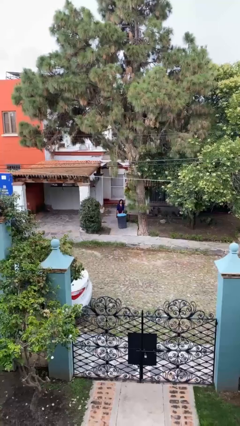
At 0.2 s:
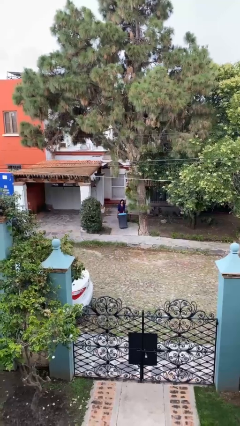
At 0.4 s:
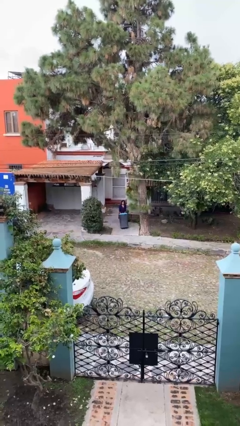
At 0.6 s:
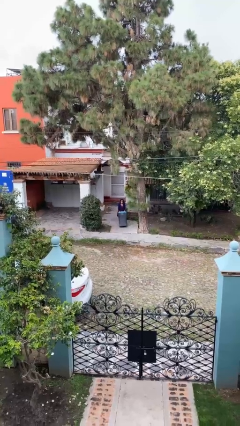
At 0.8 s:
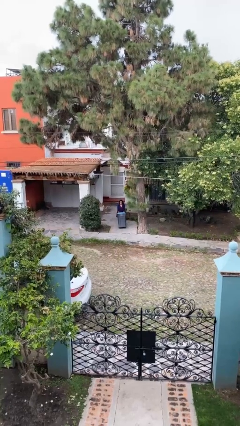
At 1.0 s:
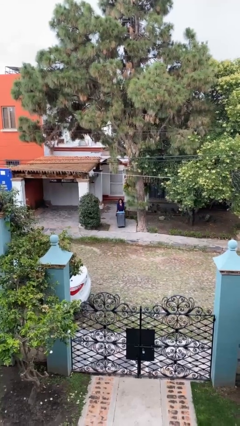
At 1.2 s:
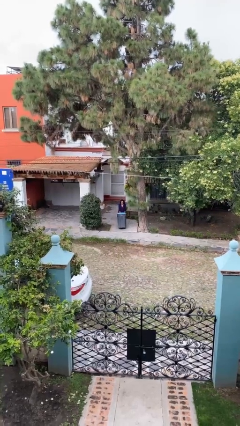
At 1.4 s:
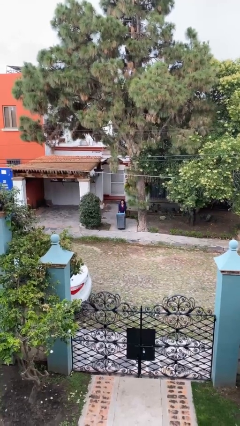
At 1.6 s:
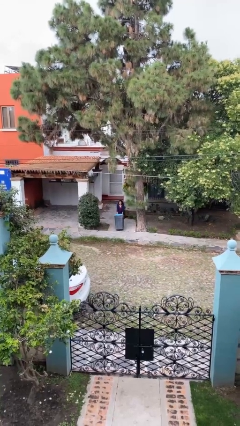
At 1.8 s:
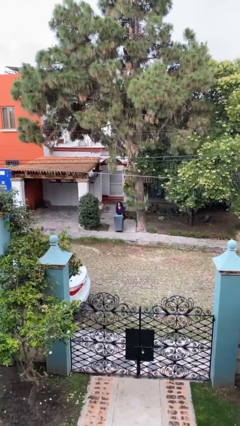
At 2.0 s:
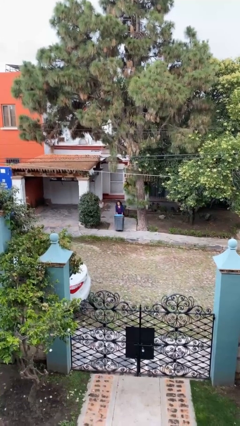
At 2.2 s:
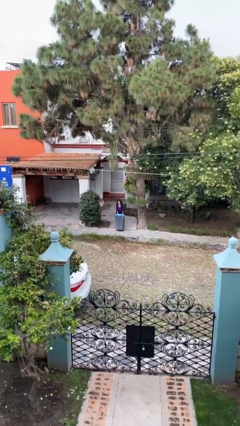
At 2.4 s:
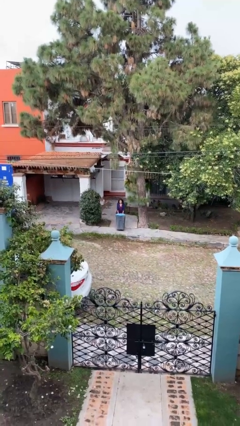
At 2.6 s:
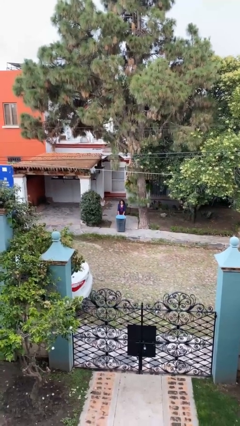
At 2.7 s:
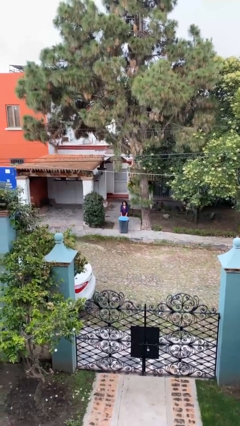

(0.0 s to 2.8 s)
person pushes wheeled trashcan

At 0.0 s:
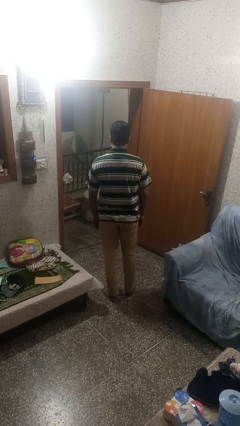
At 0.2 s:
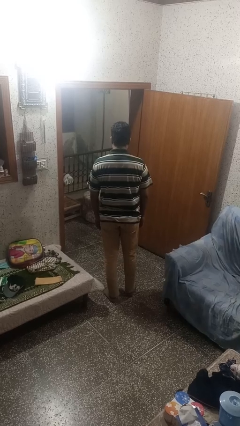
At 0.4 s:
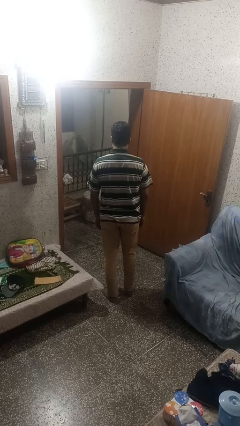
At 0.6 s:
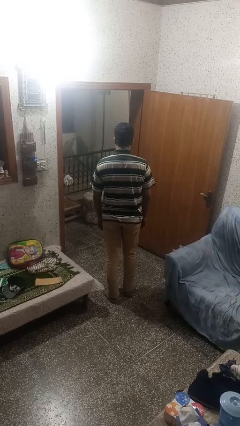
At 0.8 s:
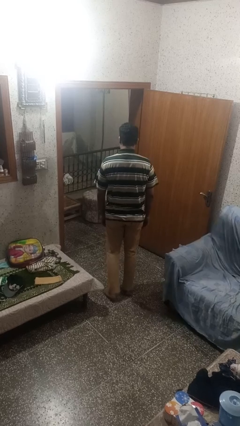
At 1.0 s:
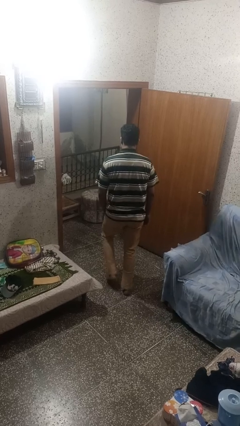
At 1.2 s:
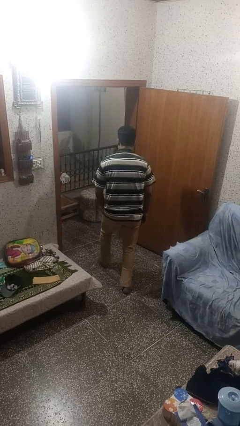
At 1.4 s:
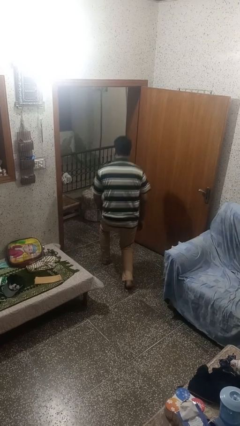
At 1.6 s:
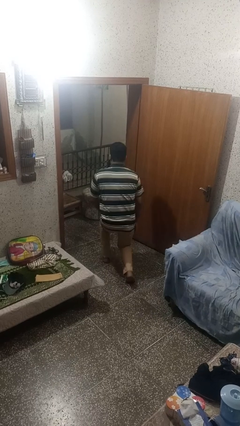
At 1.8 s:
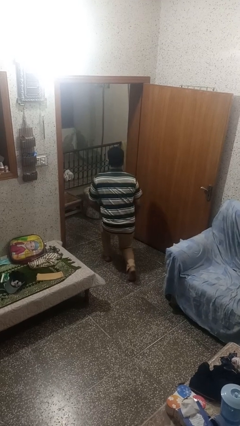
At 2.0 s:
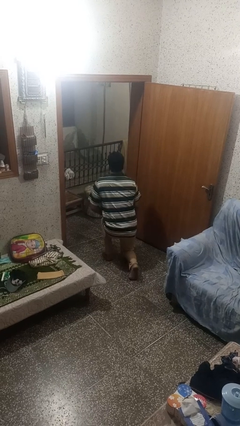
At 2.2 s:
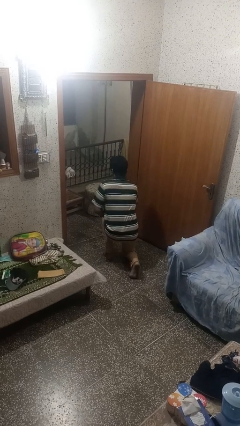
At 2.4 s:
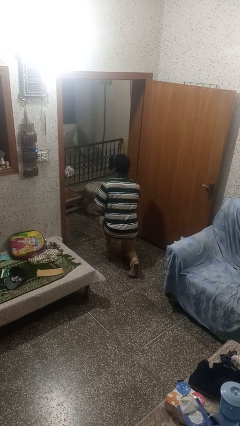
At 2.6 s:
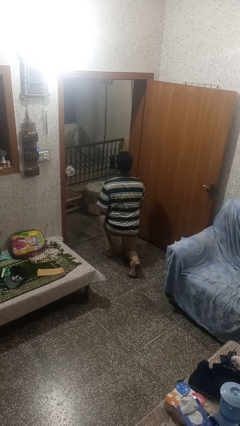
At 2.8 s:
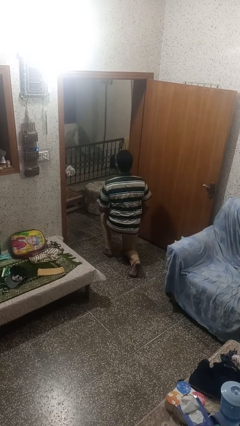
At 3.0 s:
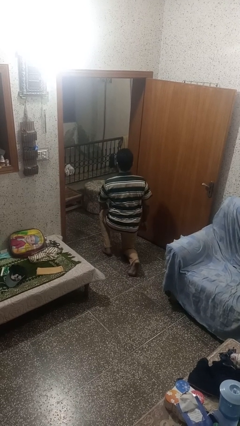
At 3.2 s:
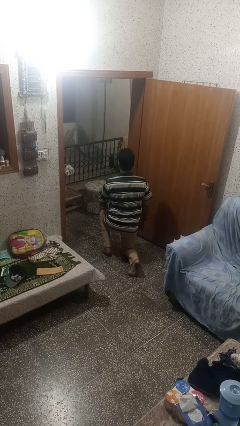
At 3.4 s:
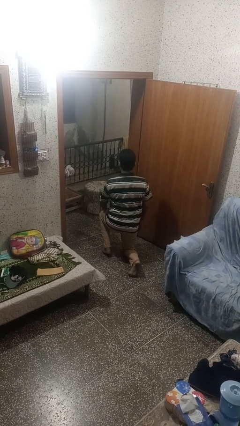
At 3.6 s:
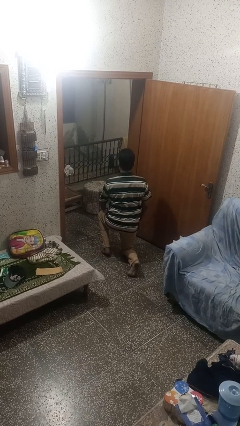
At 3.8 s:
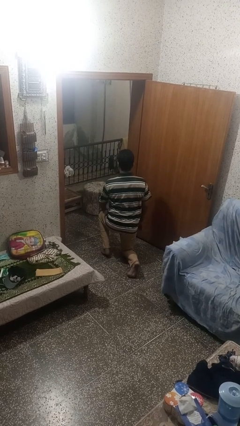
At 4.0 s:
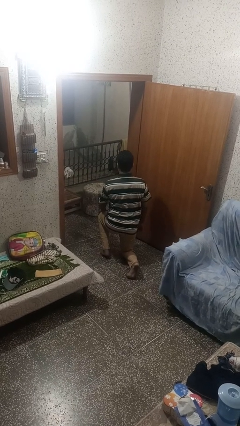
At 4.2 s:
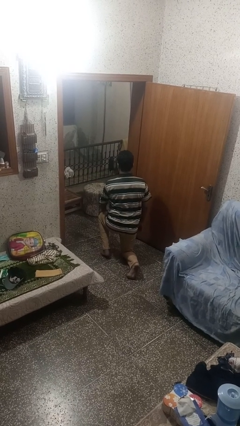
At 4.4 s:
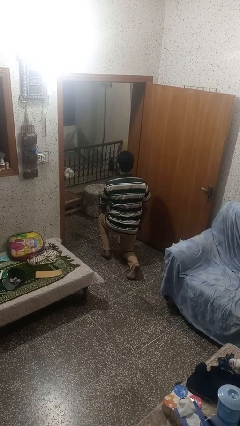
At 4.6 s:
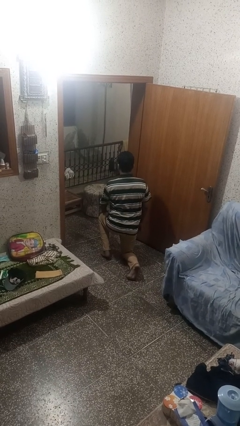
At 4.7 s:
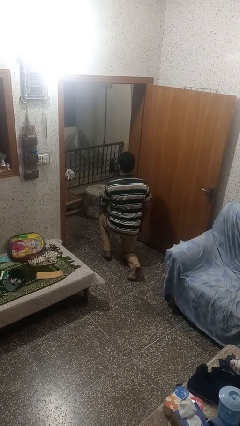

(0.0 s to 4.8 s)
person kneels

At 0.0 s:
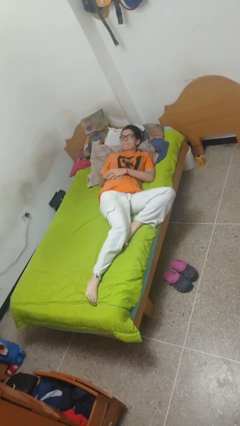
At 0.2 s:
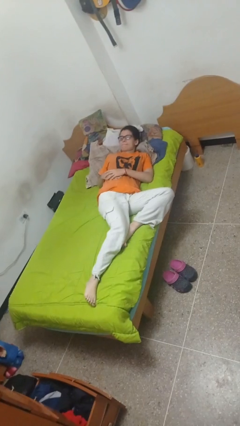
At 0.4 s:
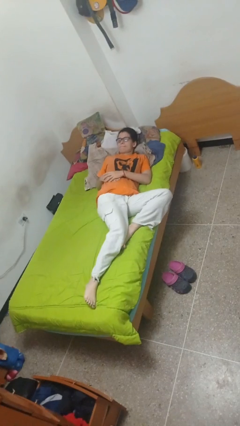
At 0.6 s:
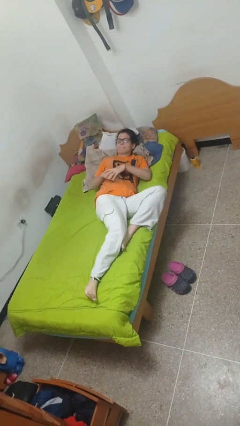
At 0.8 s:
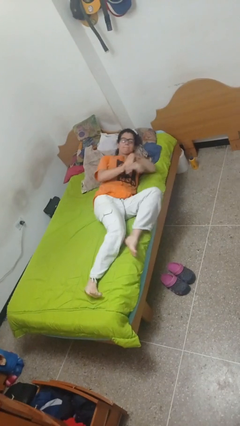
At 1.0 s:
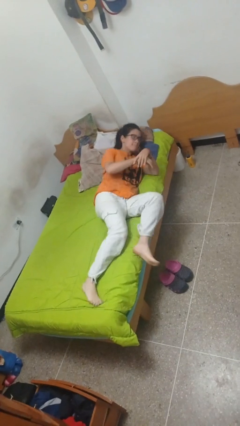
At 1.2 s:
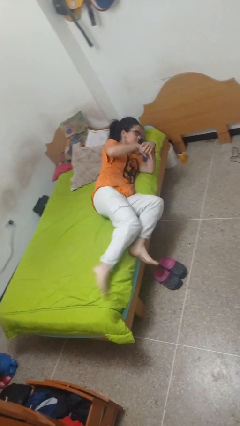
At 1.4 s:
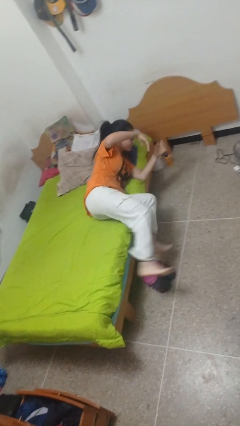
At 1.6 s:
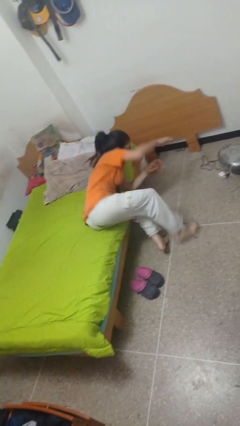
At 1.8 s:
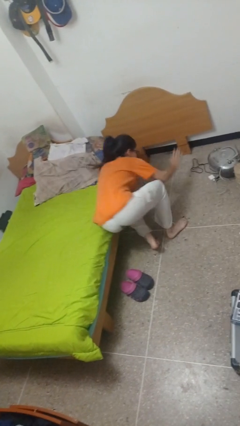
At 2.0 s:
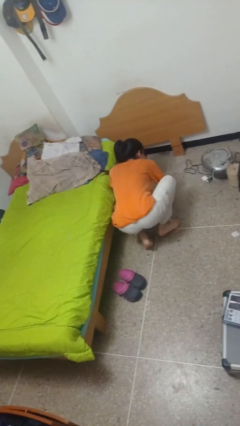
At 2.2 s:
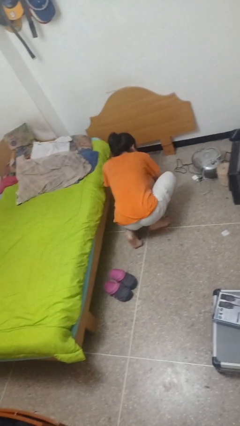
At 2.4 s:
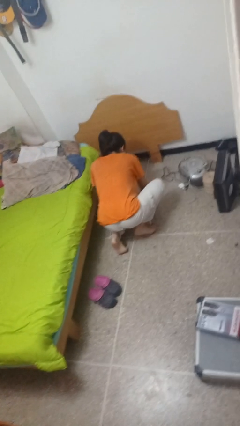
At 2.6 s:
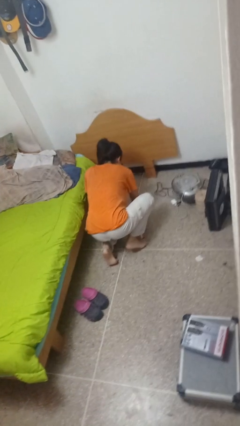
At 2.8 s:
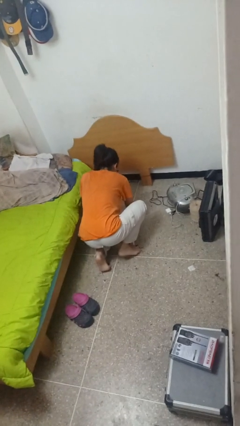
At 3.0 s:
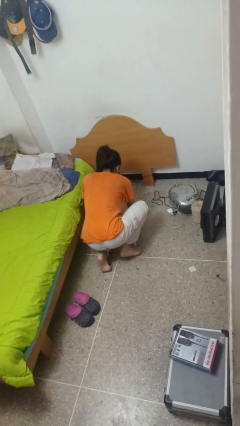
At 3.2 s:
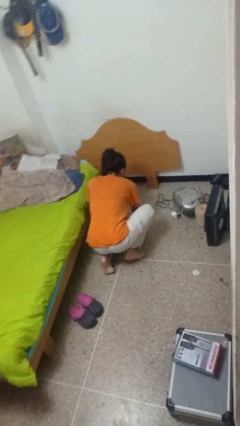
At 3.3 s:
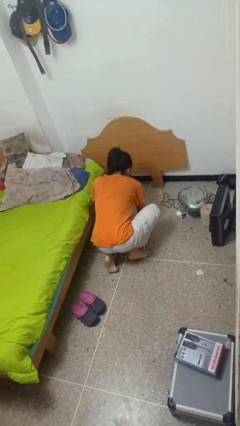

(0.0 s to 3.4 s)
person falls from bed

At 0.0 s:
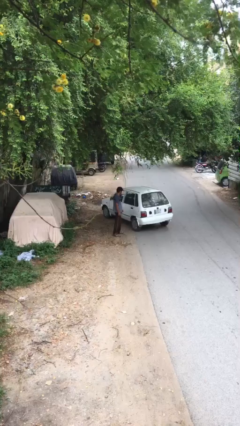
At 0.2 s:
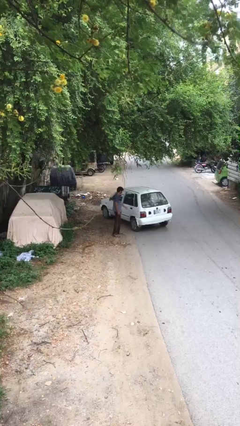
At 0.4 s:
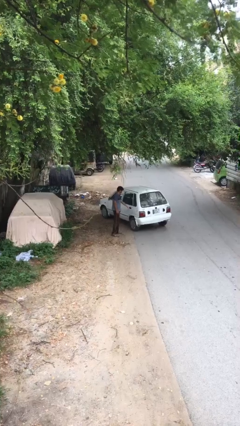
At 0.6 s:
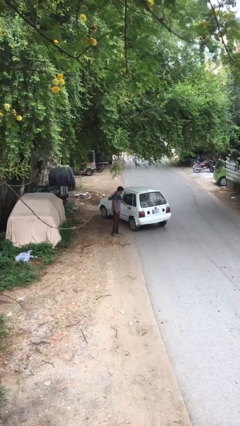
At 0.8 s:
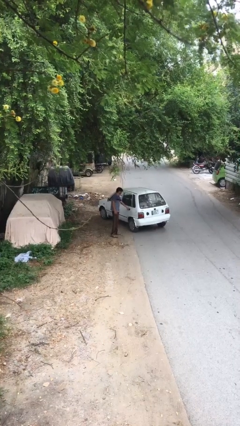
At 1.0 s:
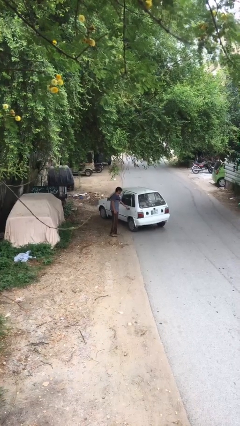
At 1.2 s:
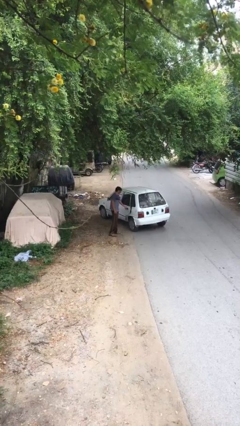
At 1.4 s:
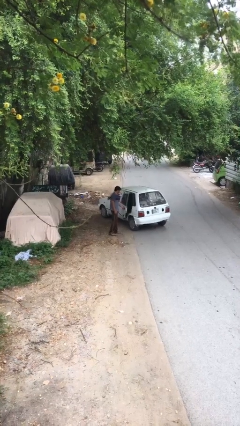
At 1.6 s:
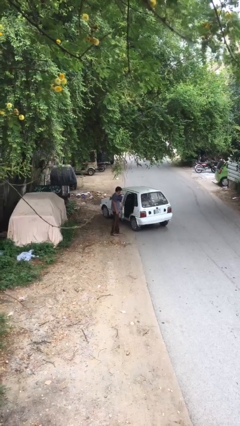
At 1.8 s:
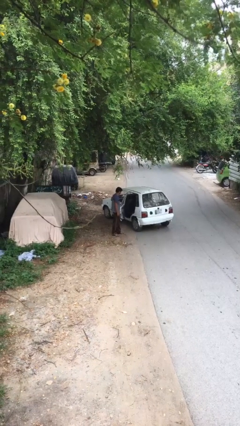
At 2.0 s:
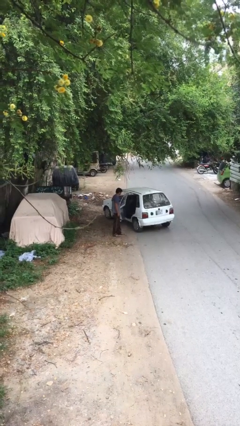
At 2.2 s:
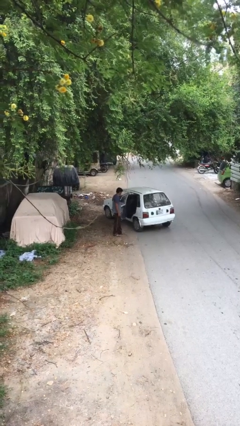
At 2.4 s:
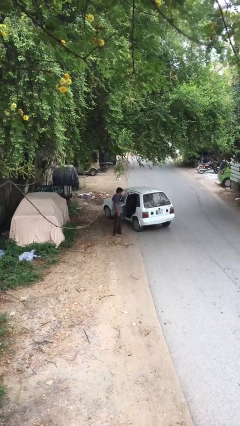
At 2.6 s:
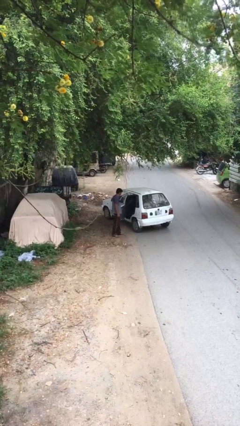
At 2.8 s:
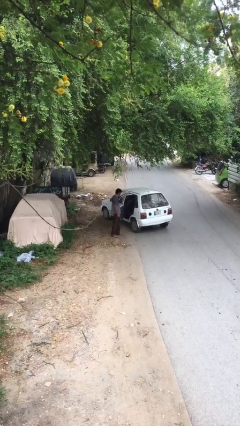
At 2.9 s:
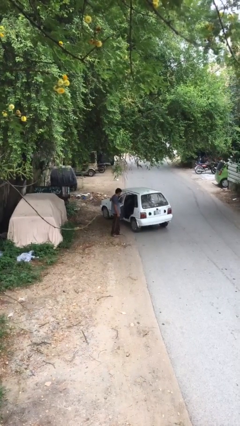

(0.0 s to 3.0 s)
person opens car door

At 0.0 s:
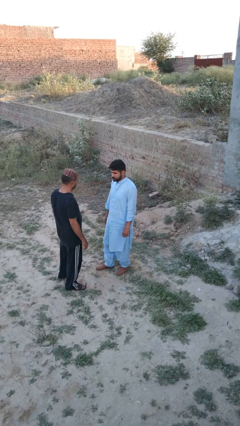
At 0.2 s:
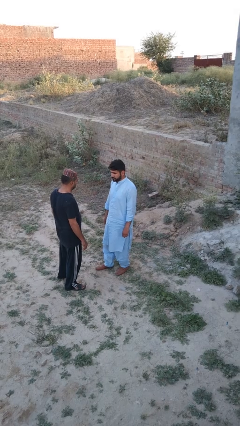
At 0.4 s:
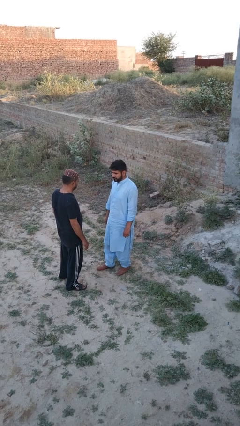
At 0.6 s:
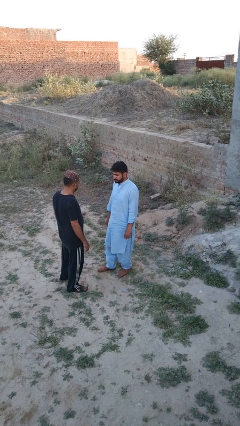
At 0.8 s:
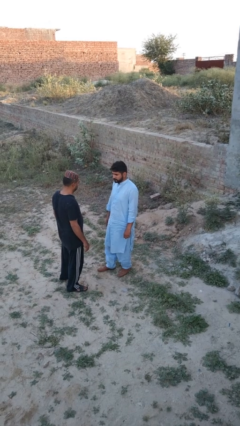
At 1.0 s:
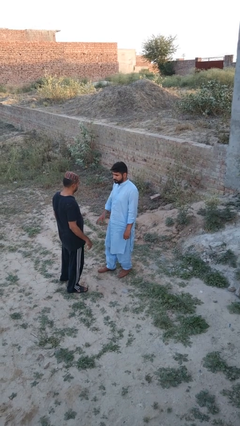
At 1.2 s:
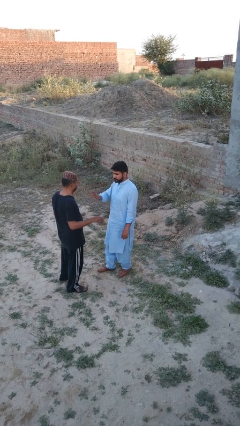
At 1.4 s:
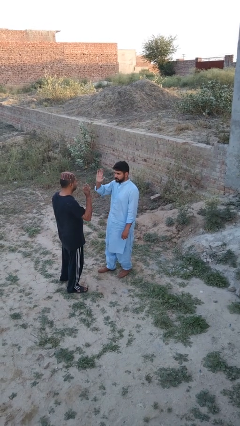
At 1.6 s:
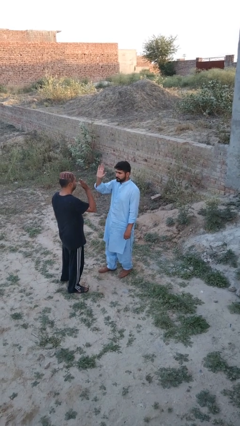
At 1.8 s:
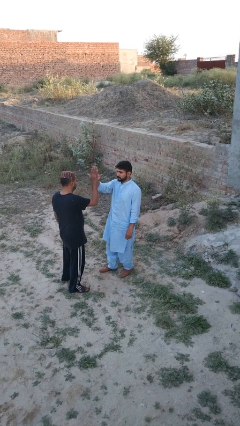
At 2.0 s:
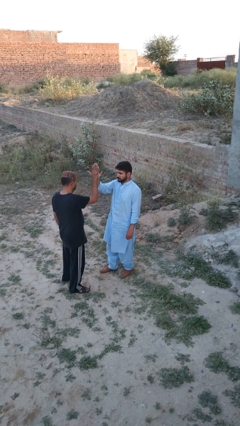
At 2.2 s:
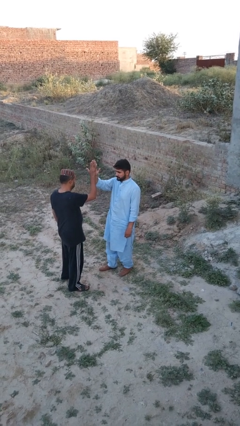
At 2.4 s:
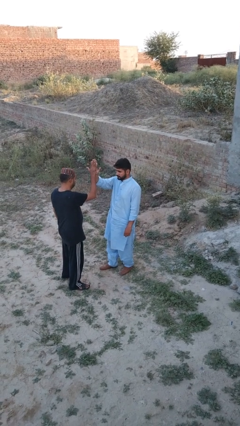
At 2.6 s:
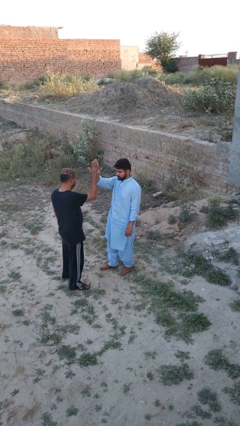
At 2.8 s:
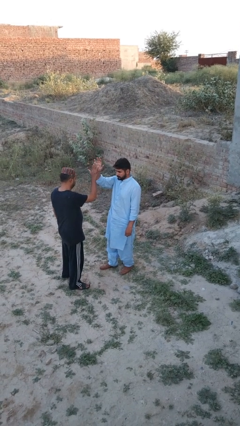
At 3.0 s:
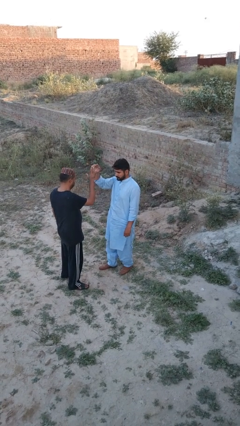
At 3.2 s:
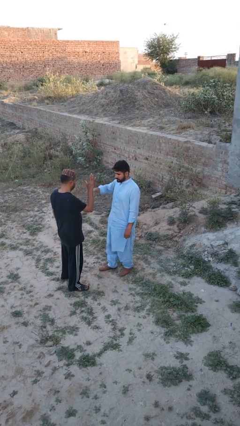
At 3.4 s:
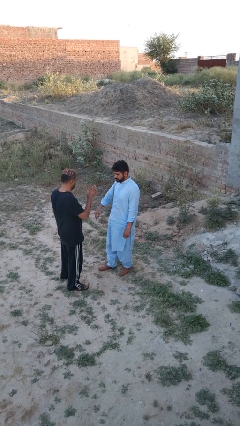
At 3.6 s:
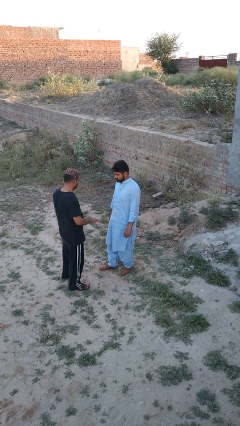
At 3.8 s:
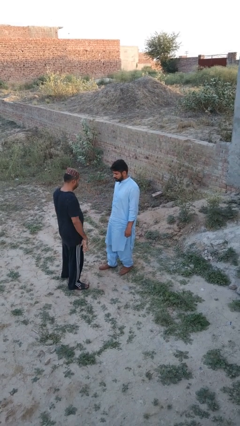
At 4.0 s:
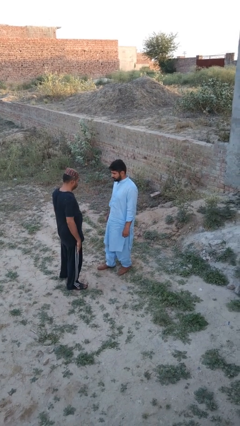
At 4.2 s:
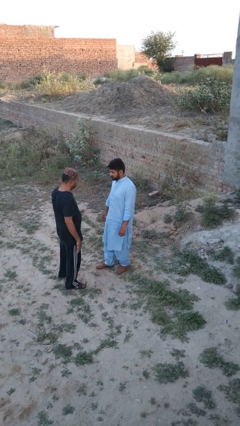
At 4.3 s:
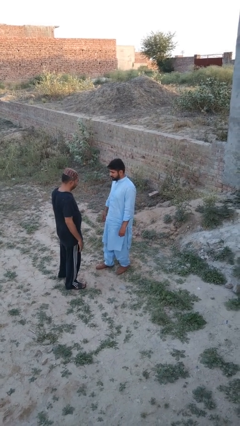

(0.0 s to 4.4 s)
person highfives hand
